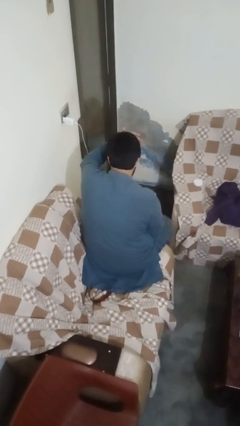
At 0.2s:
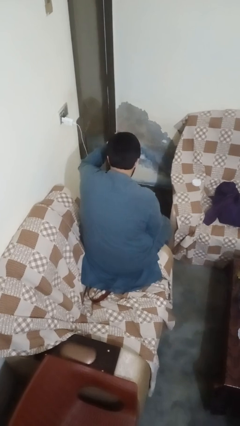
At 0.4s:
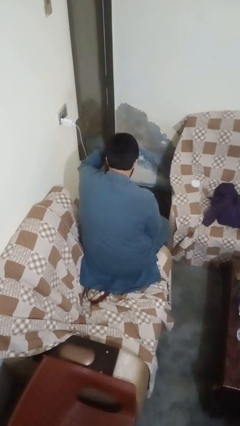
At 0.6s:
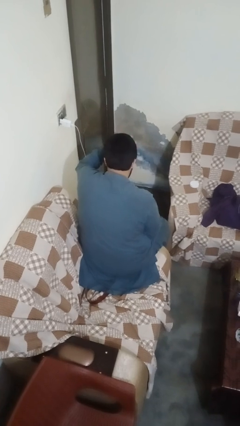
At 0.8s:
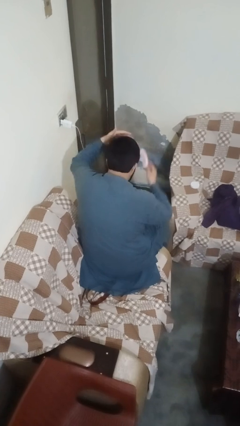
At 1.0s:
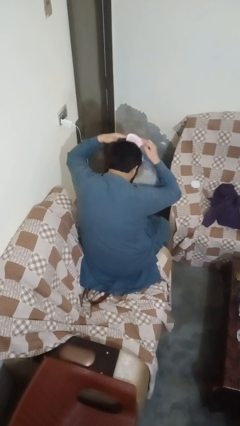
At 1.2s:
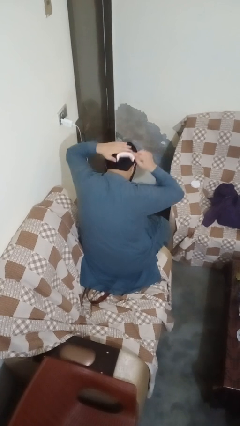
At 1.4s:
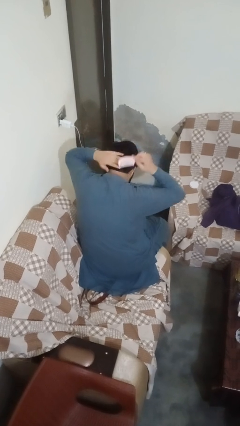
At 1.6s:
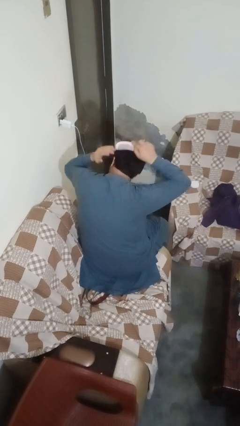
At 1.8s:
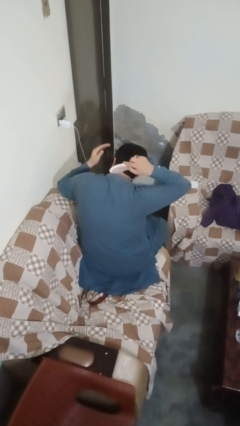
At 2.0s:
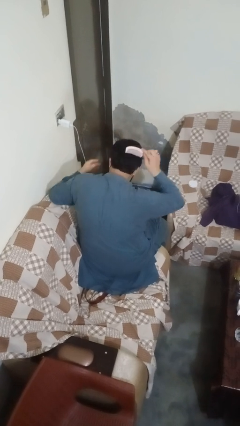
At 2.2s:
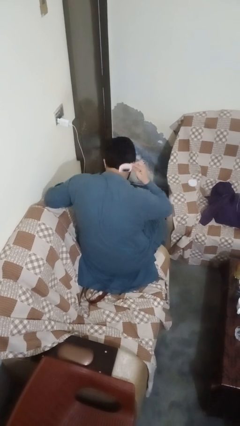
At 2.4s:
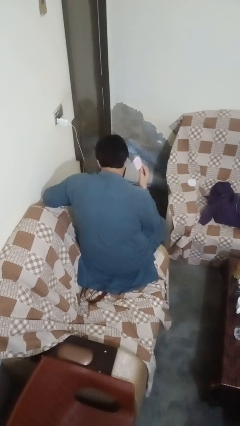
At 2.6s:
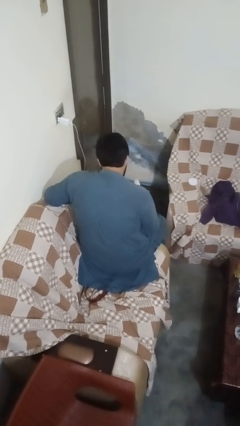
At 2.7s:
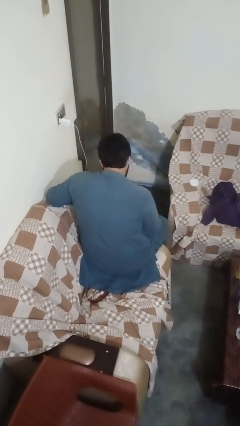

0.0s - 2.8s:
person brushes hair

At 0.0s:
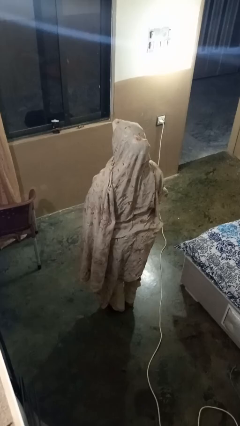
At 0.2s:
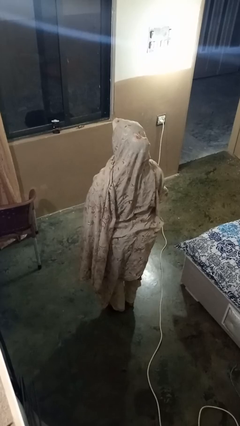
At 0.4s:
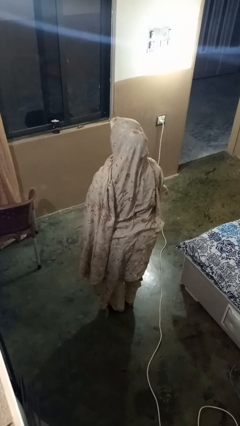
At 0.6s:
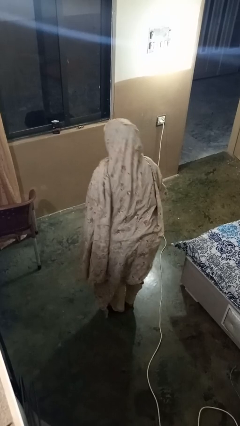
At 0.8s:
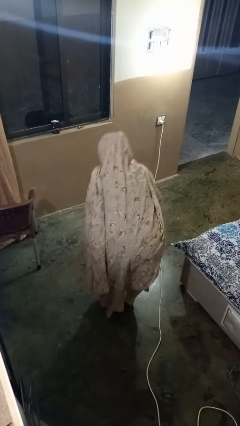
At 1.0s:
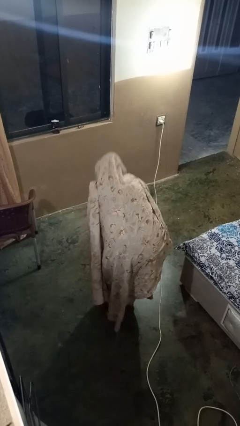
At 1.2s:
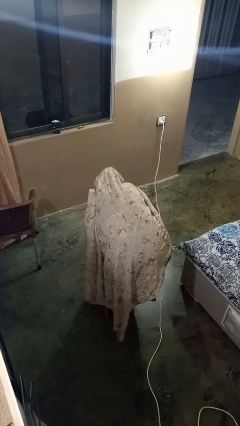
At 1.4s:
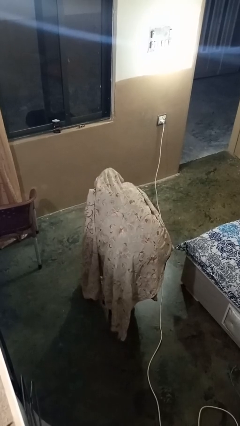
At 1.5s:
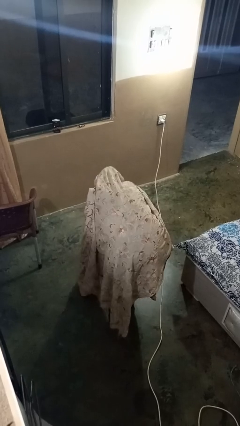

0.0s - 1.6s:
person bows

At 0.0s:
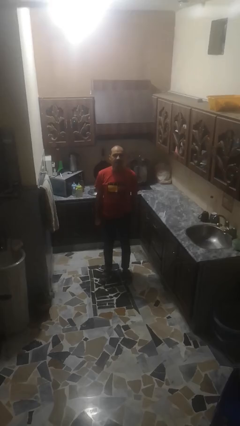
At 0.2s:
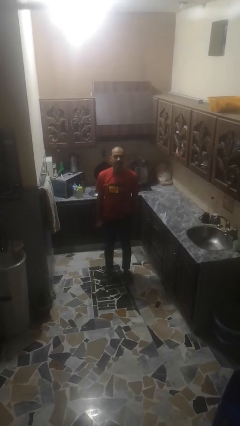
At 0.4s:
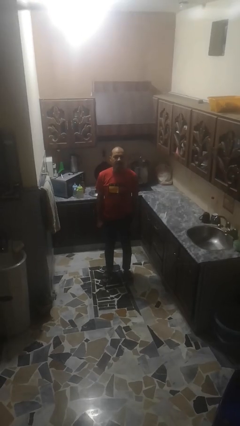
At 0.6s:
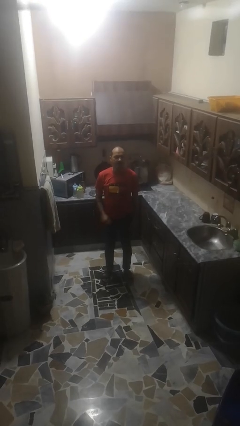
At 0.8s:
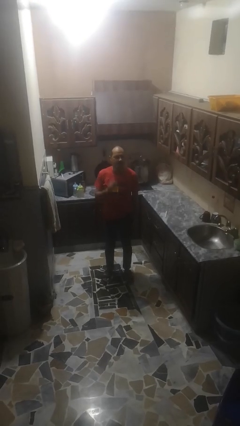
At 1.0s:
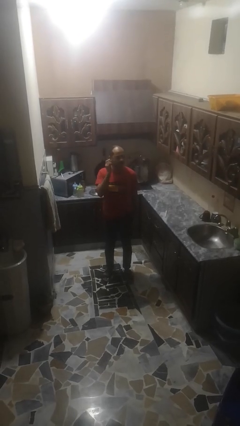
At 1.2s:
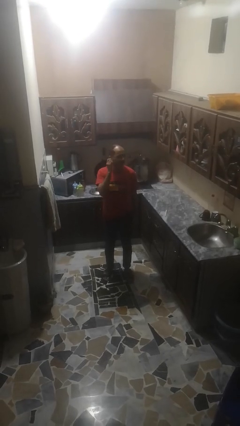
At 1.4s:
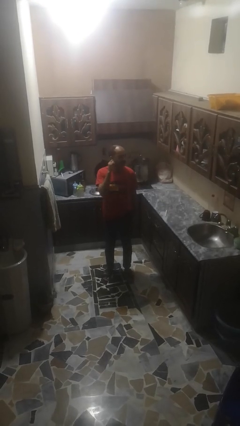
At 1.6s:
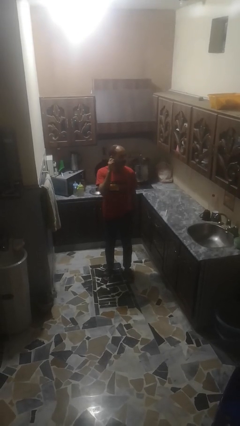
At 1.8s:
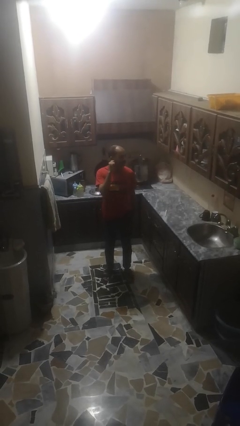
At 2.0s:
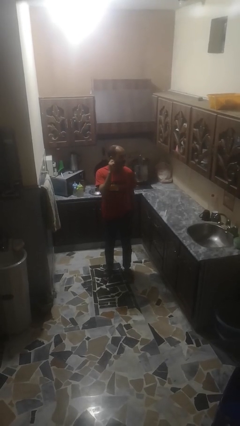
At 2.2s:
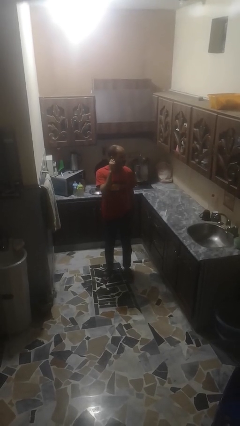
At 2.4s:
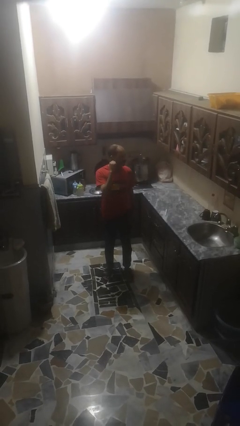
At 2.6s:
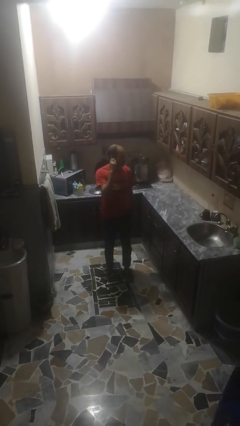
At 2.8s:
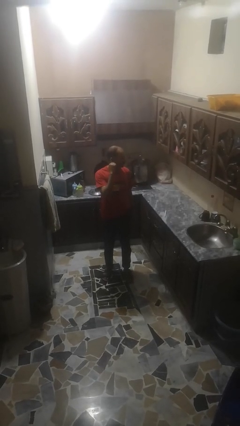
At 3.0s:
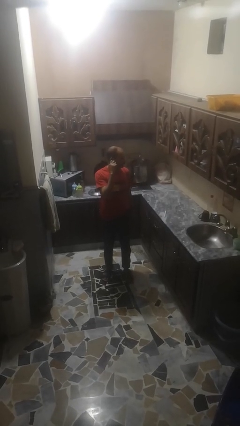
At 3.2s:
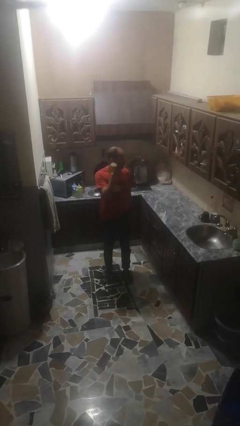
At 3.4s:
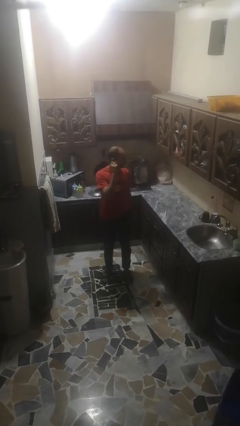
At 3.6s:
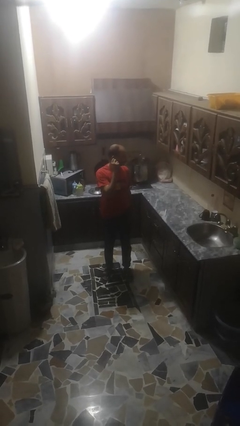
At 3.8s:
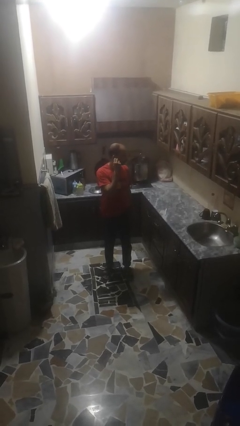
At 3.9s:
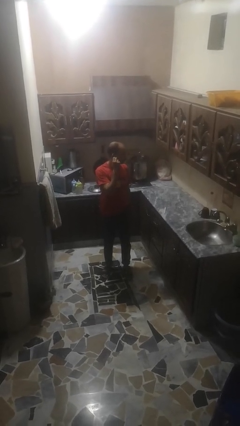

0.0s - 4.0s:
person touches earlobe

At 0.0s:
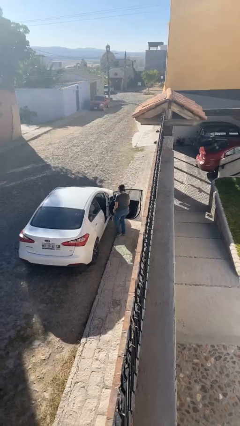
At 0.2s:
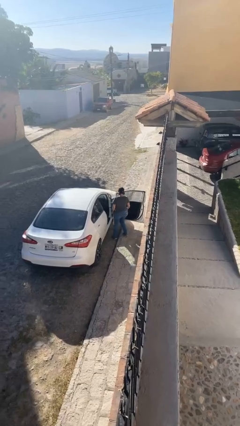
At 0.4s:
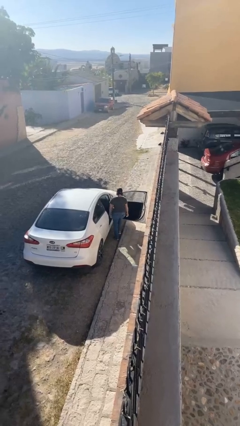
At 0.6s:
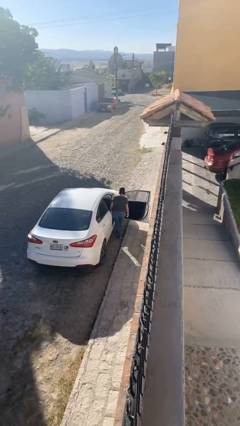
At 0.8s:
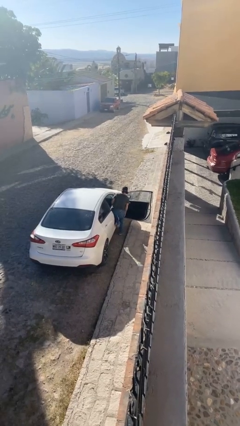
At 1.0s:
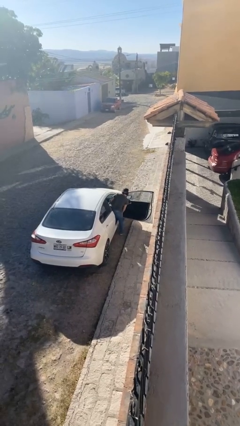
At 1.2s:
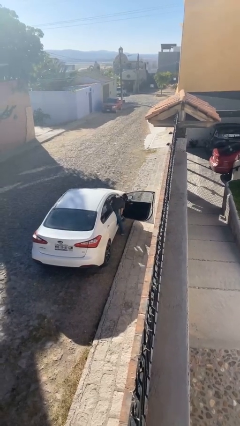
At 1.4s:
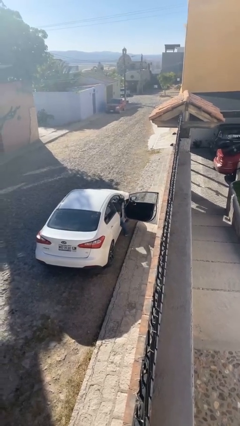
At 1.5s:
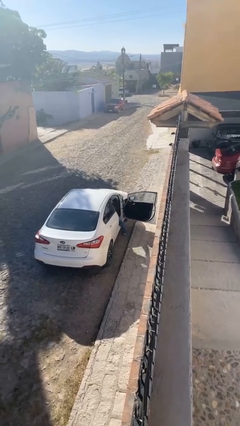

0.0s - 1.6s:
person enters car

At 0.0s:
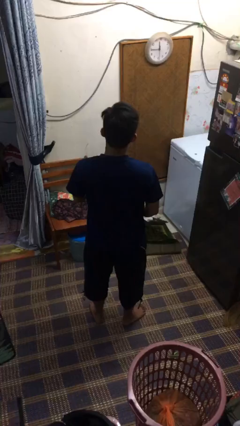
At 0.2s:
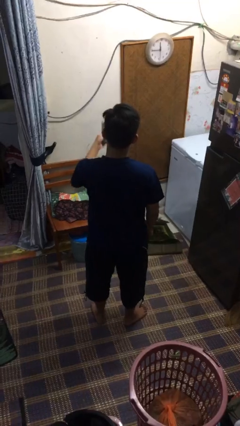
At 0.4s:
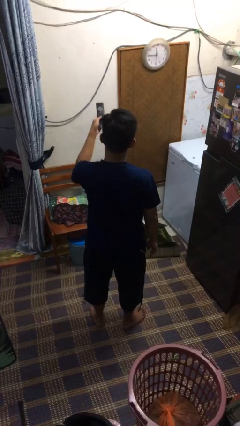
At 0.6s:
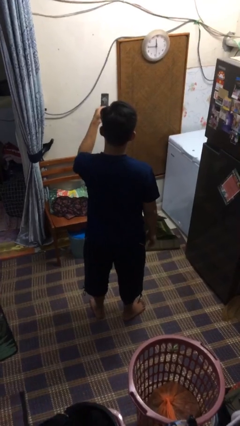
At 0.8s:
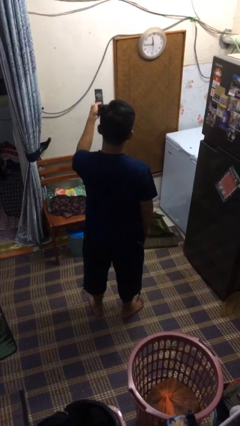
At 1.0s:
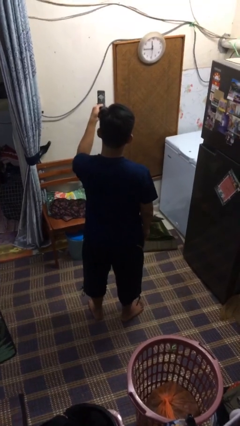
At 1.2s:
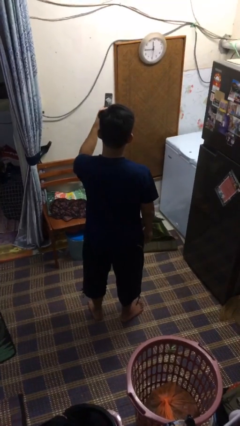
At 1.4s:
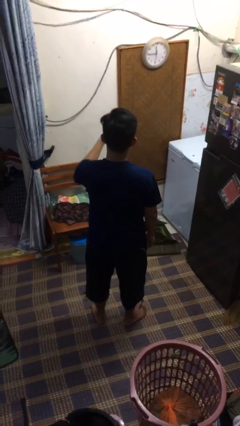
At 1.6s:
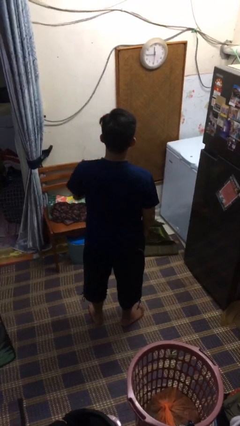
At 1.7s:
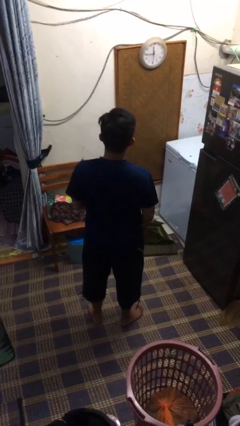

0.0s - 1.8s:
person uses television remote

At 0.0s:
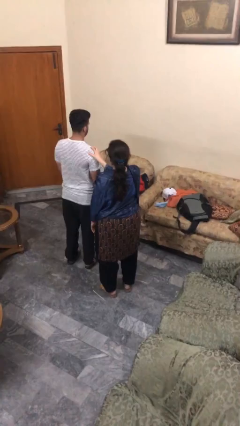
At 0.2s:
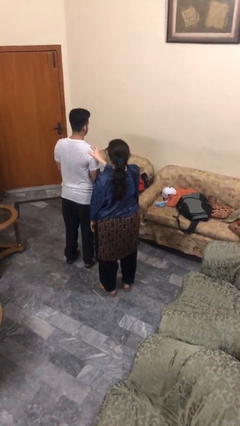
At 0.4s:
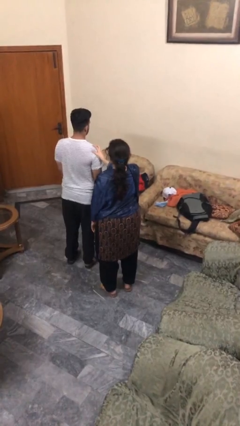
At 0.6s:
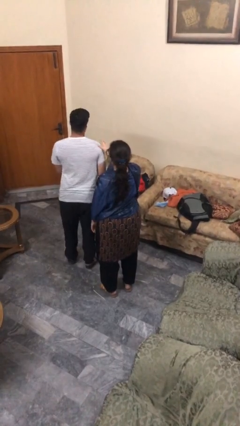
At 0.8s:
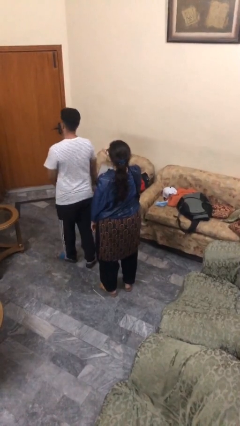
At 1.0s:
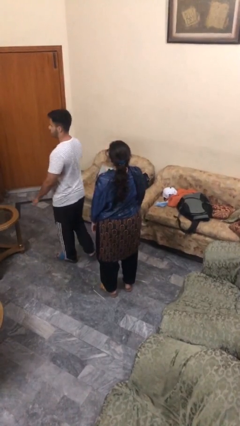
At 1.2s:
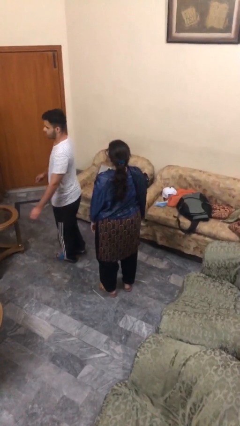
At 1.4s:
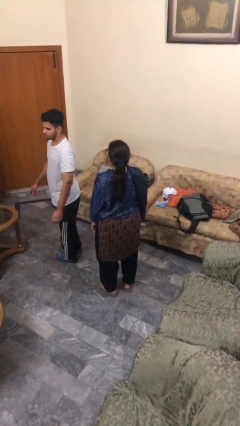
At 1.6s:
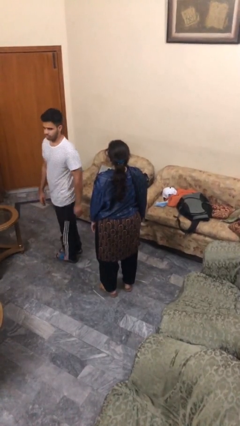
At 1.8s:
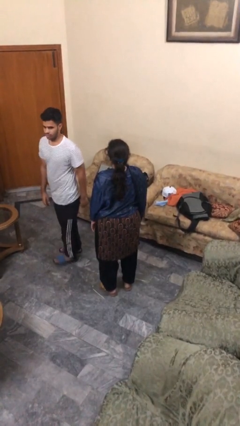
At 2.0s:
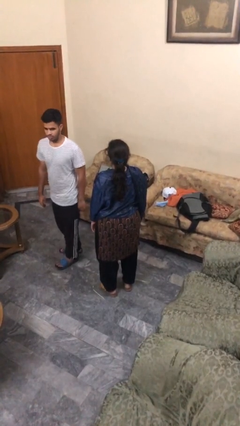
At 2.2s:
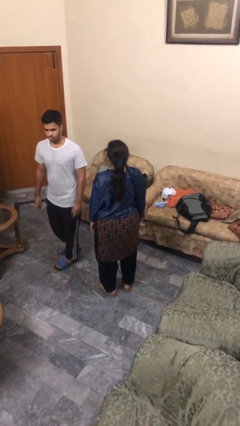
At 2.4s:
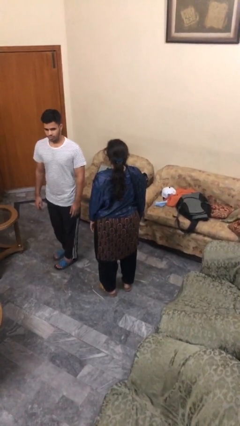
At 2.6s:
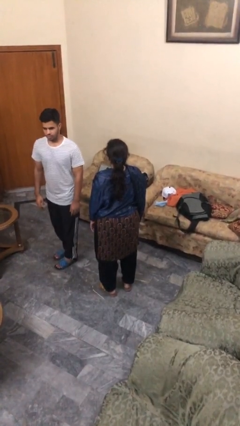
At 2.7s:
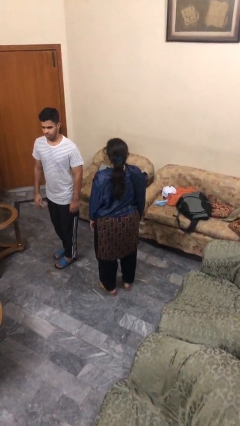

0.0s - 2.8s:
person spins person around

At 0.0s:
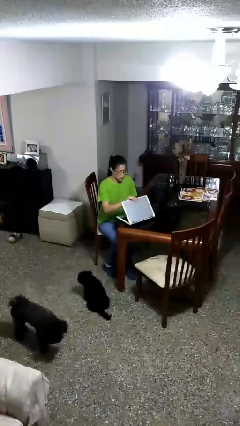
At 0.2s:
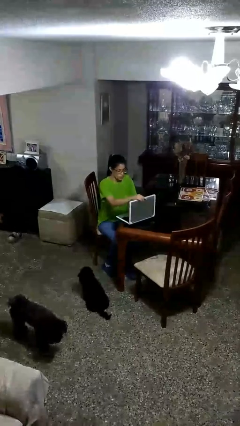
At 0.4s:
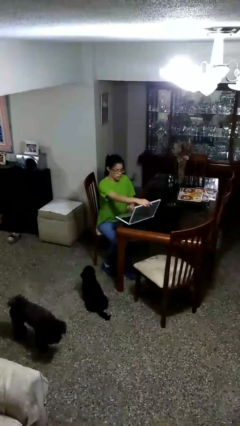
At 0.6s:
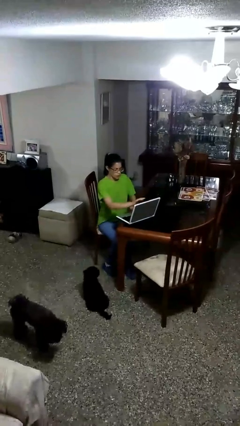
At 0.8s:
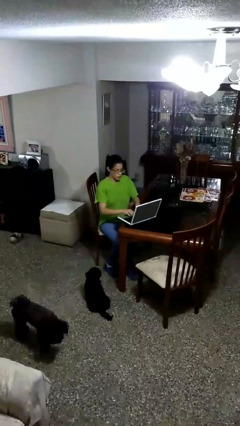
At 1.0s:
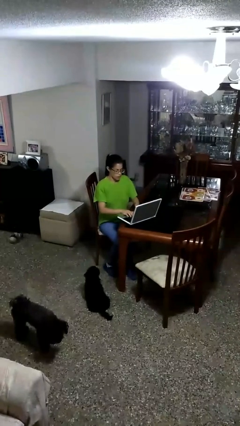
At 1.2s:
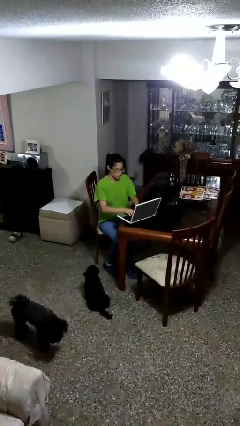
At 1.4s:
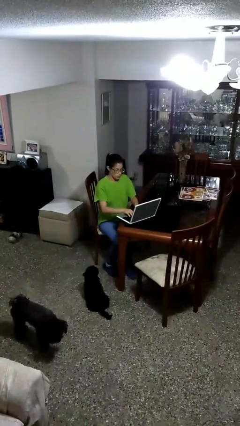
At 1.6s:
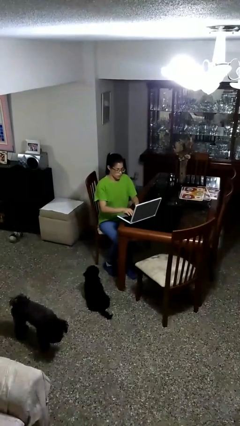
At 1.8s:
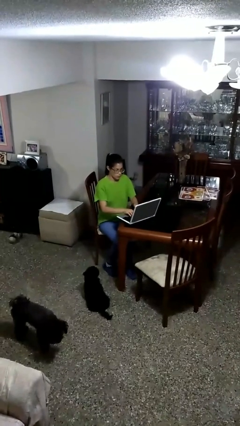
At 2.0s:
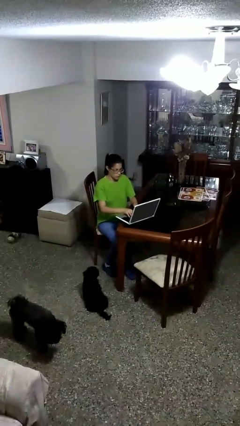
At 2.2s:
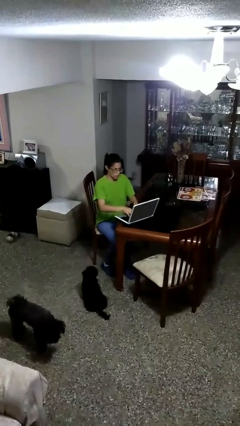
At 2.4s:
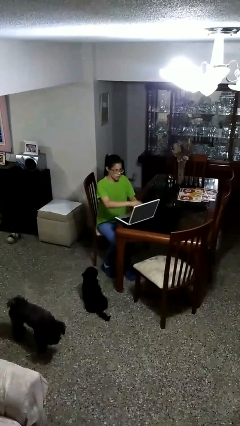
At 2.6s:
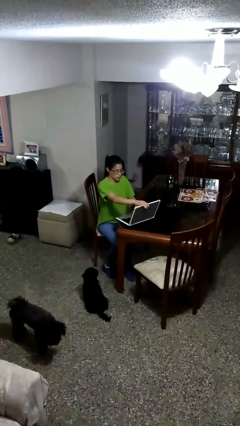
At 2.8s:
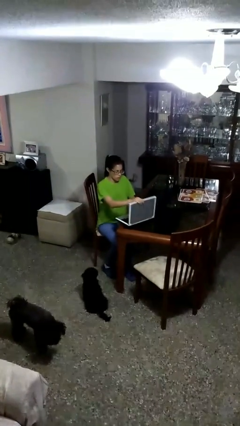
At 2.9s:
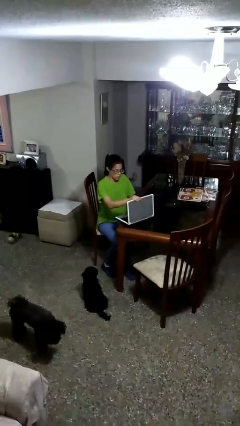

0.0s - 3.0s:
person interacts with laptop
